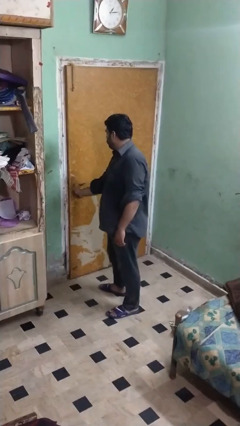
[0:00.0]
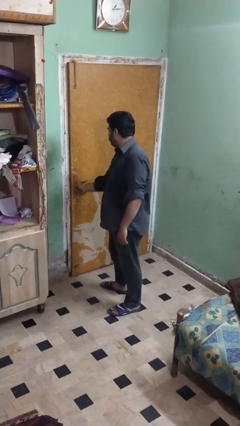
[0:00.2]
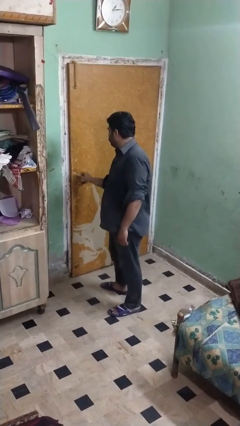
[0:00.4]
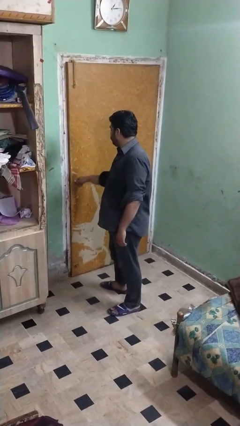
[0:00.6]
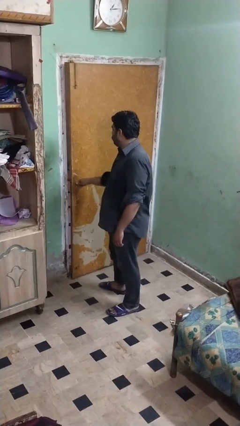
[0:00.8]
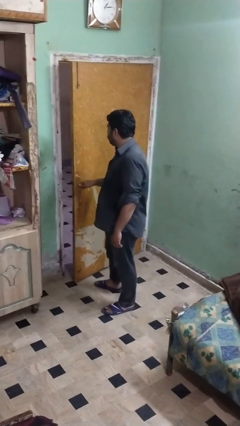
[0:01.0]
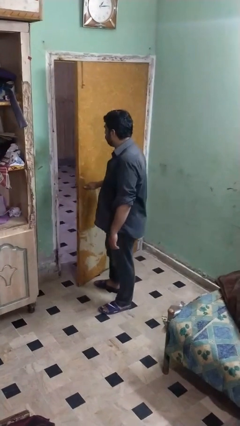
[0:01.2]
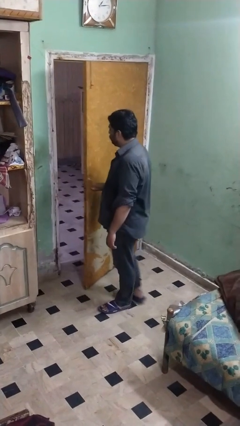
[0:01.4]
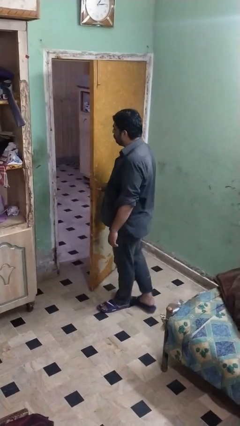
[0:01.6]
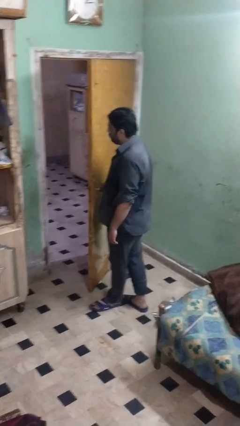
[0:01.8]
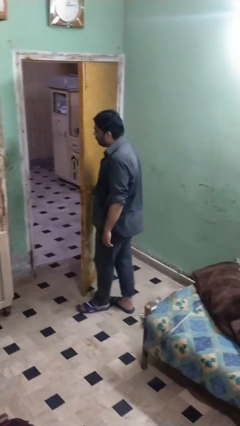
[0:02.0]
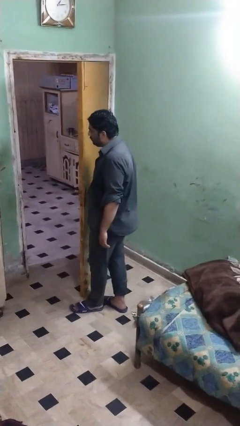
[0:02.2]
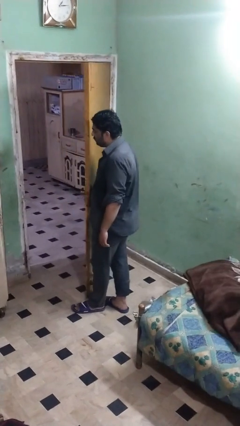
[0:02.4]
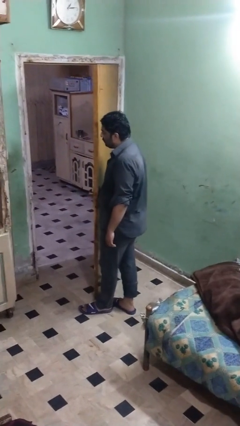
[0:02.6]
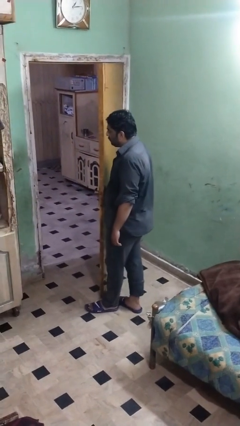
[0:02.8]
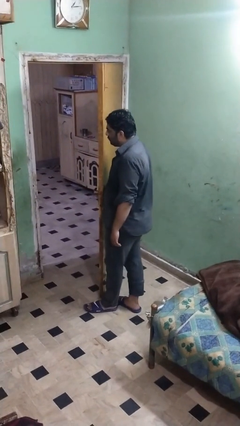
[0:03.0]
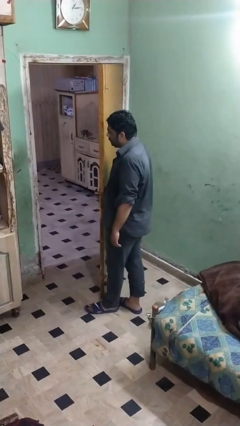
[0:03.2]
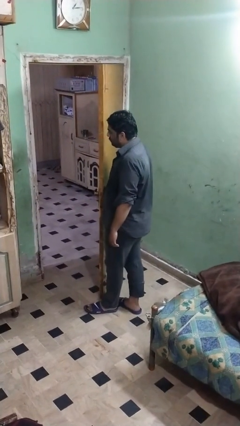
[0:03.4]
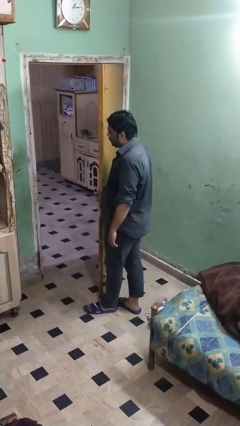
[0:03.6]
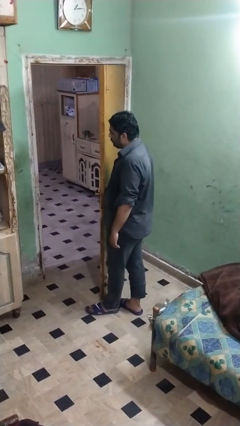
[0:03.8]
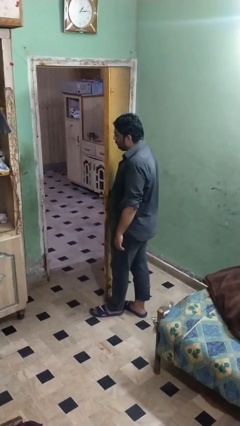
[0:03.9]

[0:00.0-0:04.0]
person opens facility door

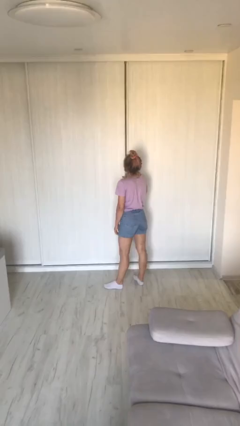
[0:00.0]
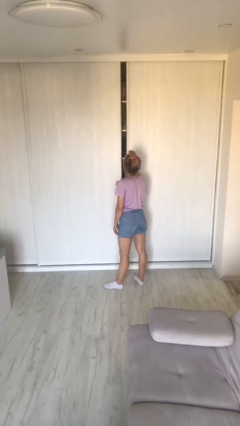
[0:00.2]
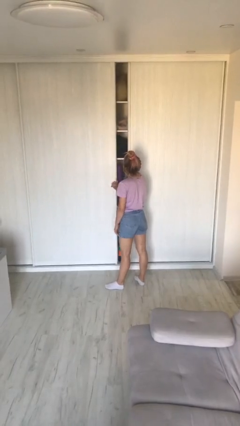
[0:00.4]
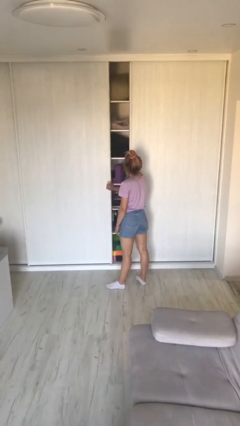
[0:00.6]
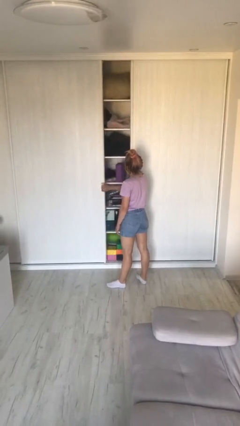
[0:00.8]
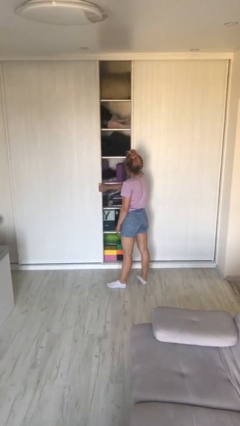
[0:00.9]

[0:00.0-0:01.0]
person opens sliding door

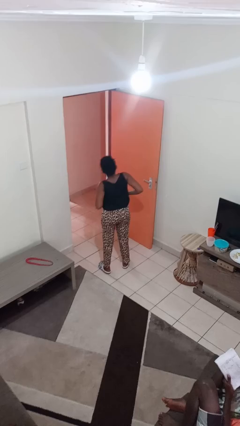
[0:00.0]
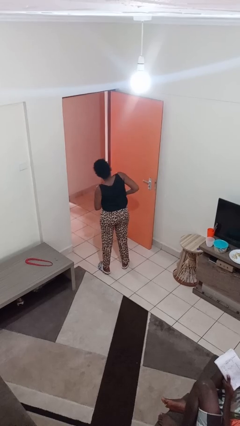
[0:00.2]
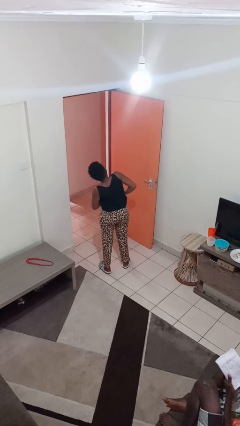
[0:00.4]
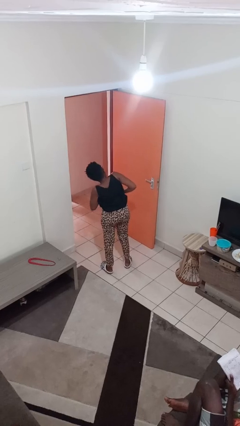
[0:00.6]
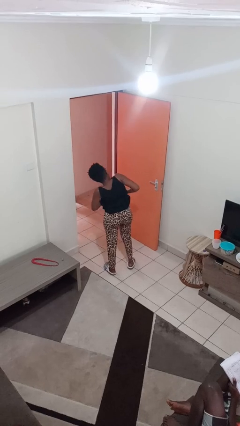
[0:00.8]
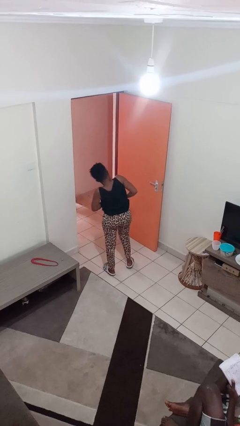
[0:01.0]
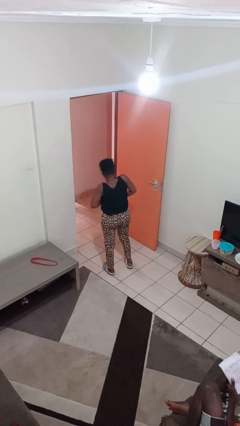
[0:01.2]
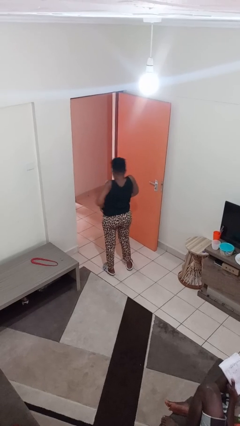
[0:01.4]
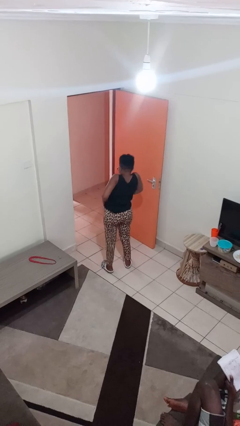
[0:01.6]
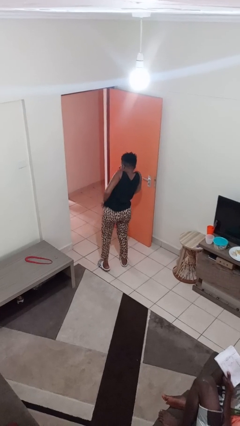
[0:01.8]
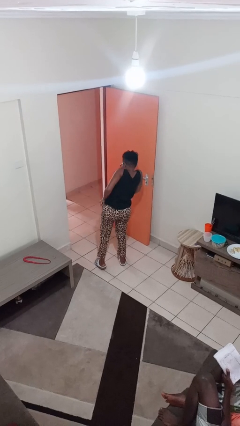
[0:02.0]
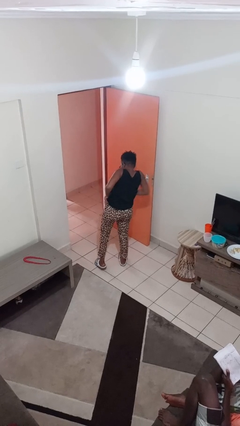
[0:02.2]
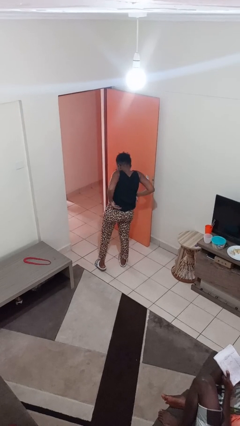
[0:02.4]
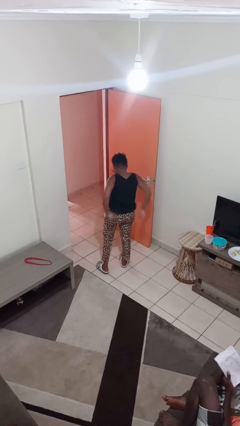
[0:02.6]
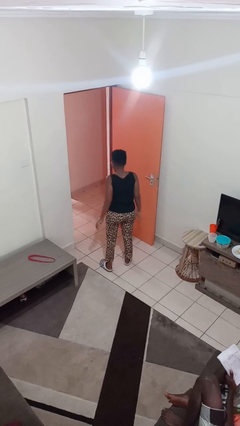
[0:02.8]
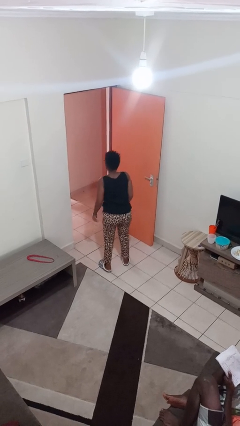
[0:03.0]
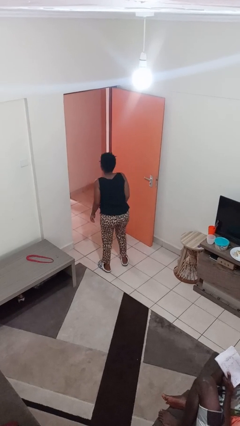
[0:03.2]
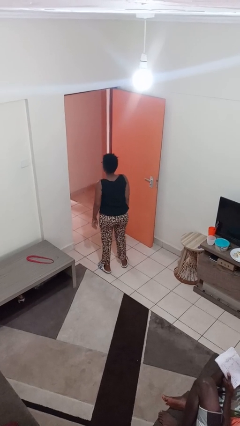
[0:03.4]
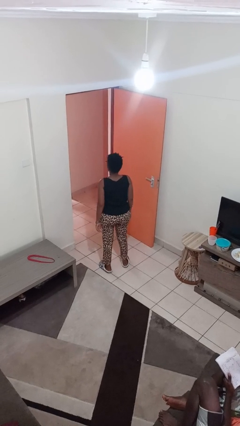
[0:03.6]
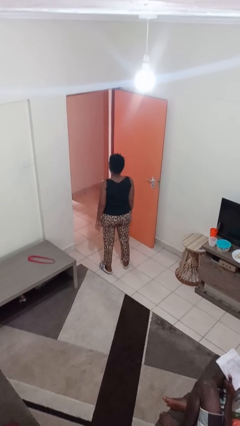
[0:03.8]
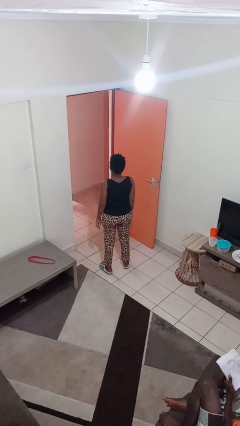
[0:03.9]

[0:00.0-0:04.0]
person hikes up pants

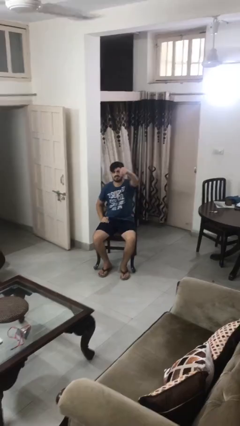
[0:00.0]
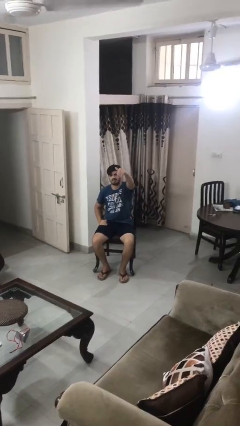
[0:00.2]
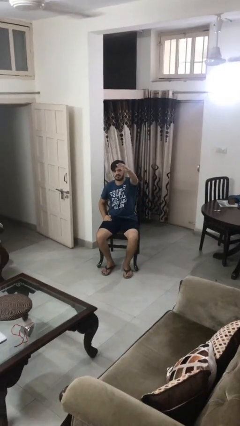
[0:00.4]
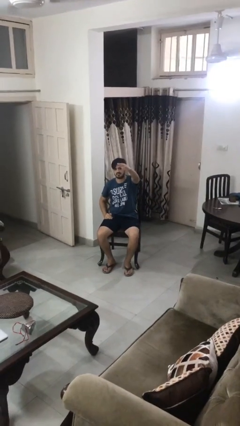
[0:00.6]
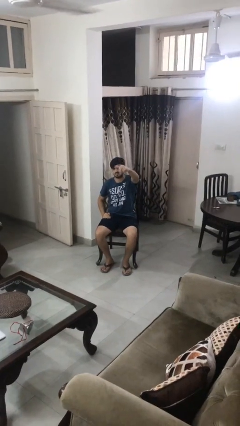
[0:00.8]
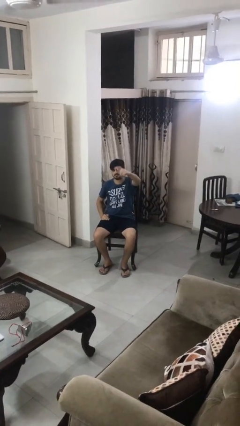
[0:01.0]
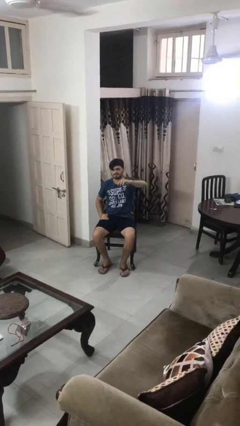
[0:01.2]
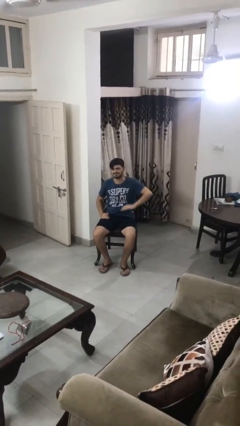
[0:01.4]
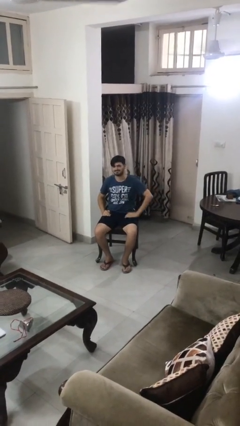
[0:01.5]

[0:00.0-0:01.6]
person gestures come here

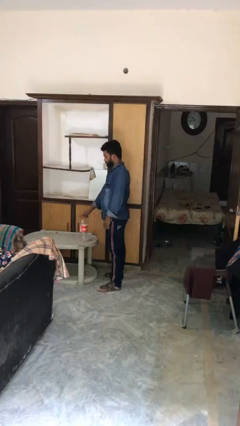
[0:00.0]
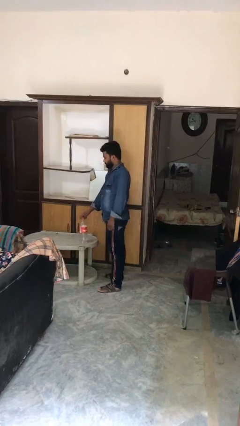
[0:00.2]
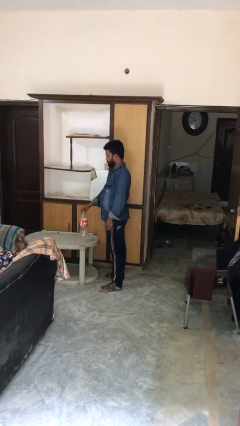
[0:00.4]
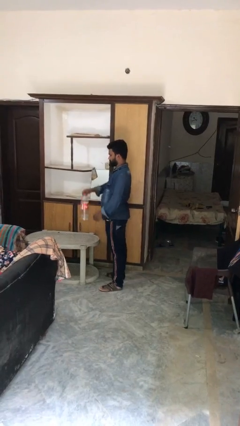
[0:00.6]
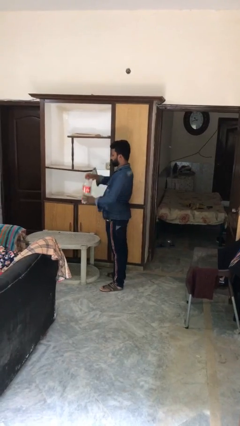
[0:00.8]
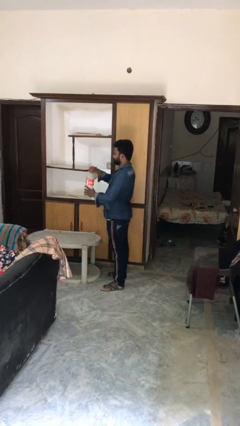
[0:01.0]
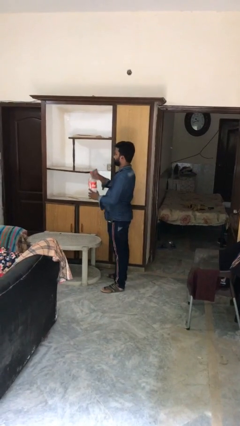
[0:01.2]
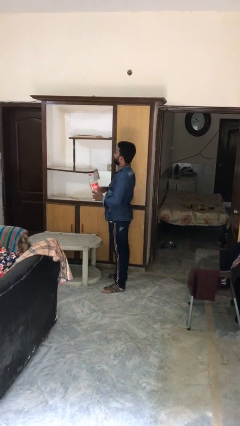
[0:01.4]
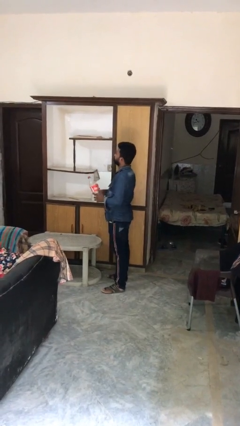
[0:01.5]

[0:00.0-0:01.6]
person picks up object from table

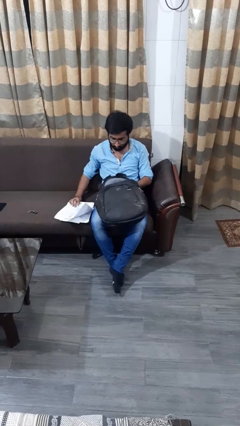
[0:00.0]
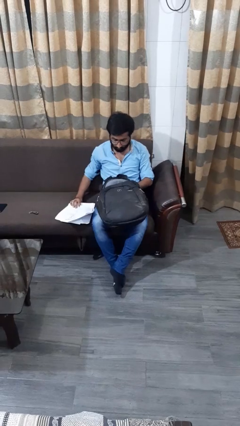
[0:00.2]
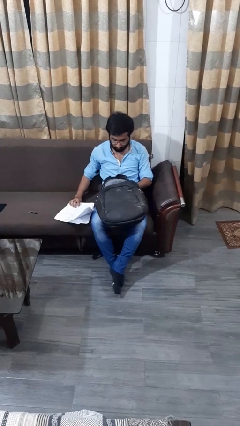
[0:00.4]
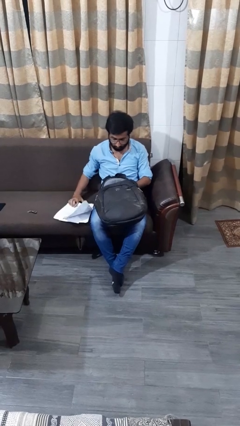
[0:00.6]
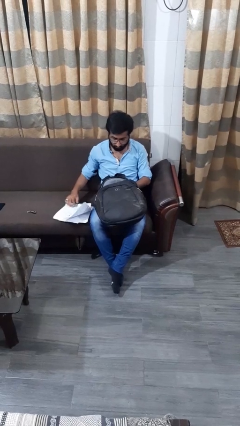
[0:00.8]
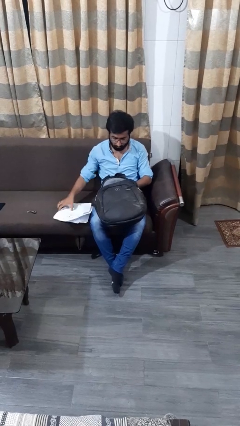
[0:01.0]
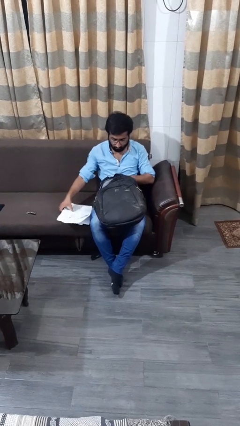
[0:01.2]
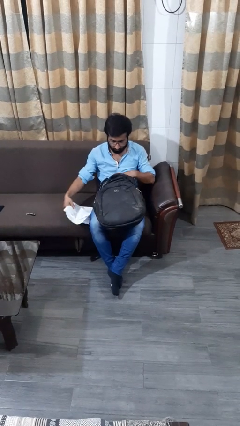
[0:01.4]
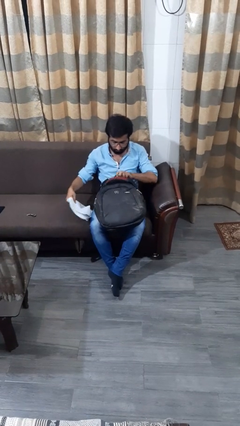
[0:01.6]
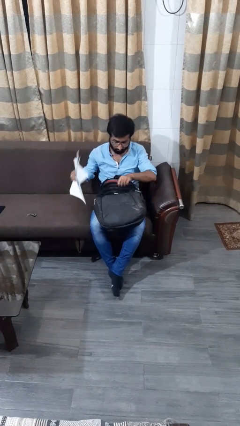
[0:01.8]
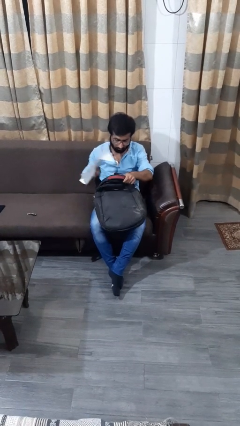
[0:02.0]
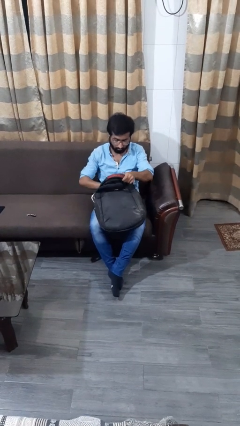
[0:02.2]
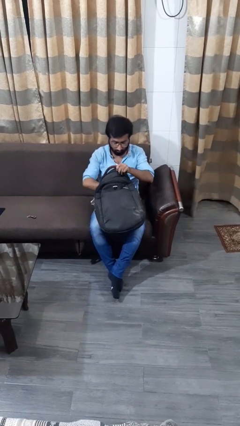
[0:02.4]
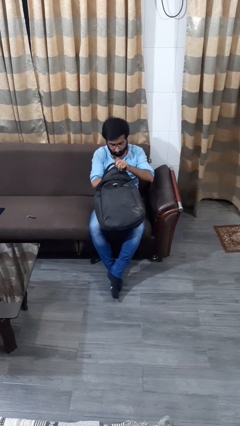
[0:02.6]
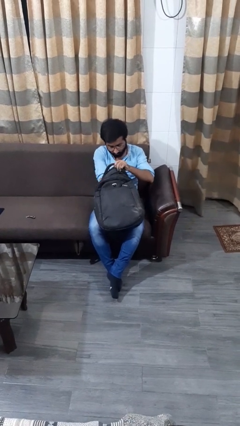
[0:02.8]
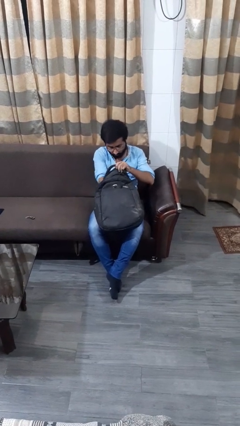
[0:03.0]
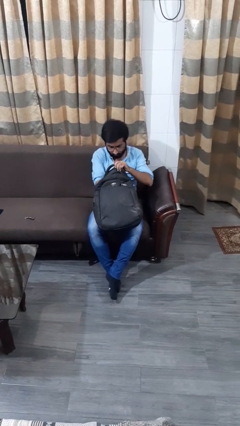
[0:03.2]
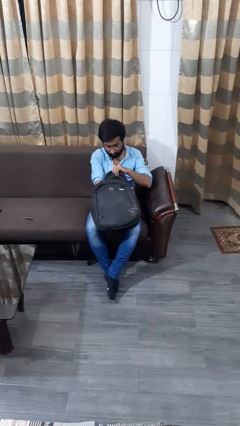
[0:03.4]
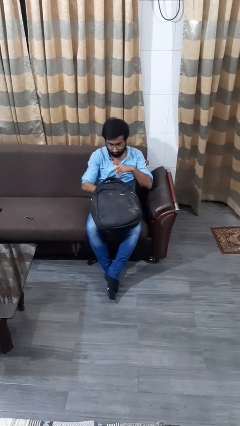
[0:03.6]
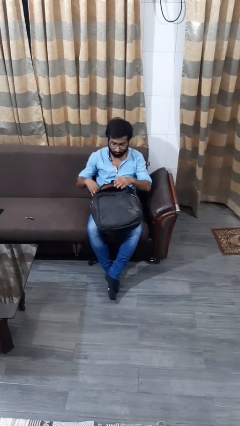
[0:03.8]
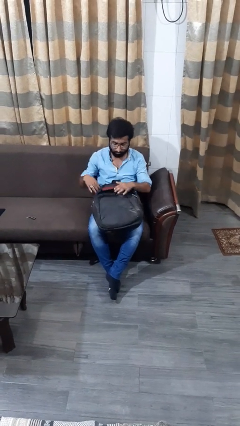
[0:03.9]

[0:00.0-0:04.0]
person puts object into backpack

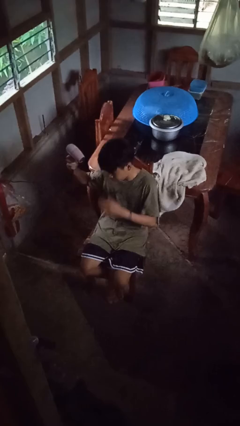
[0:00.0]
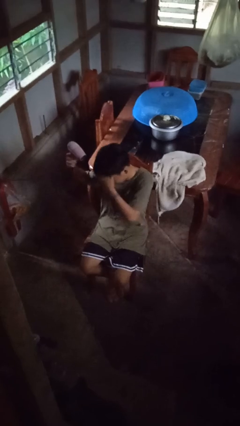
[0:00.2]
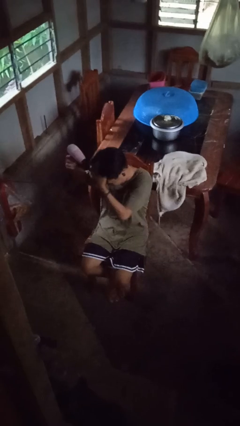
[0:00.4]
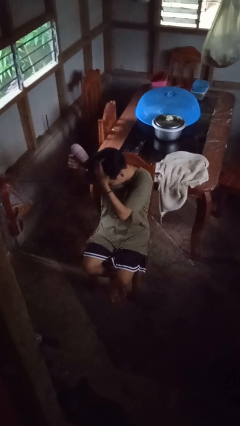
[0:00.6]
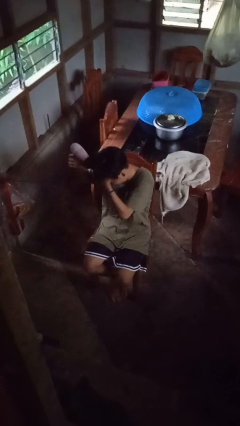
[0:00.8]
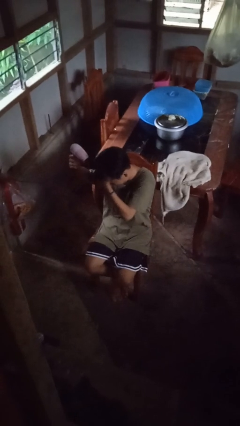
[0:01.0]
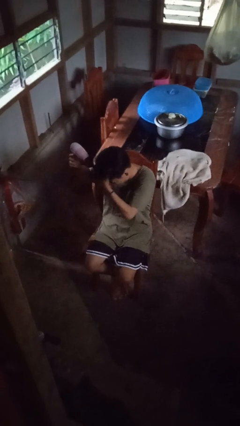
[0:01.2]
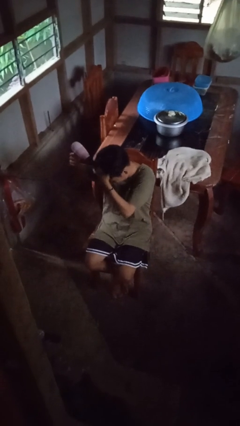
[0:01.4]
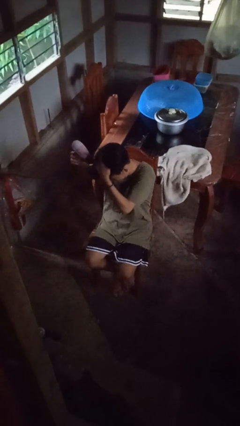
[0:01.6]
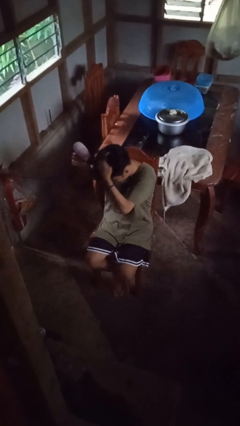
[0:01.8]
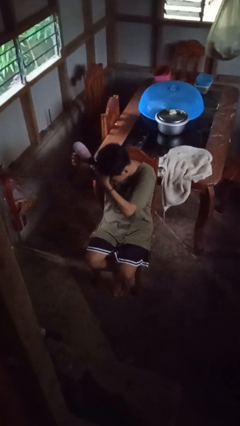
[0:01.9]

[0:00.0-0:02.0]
person dries hair with hairdryer
